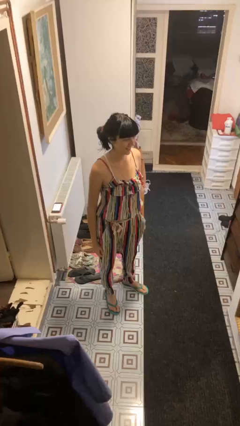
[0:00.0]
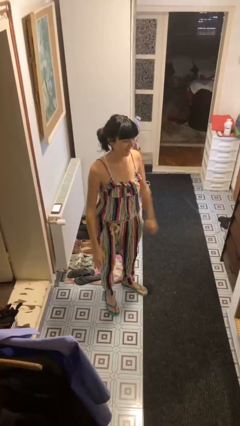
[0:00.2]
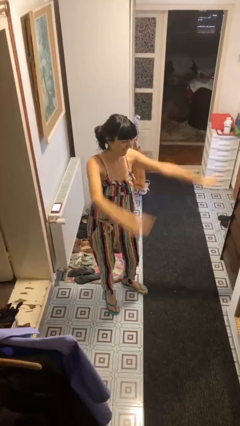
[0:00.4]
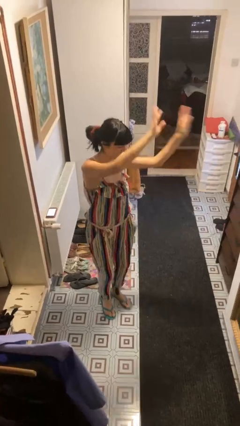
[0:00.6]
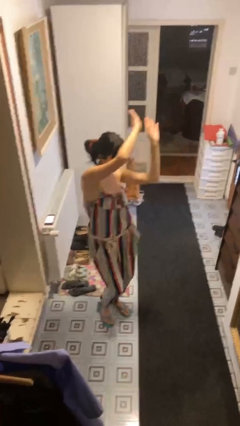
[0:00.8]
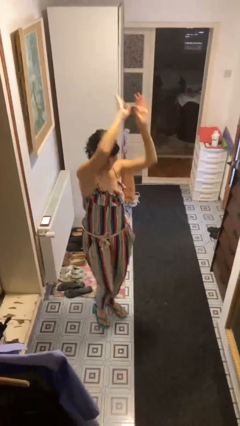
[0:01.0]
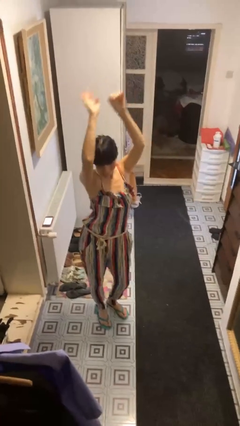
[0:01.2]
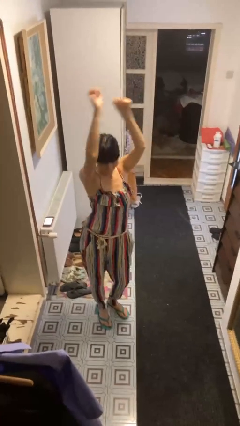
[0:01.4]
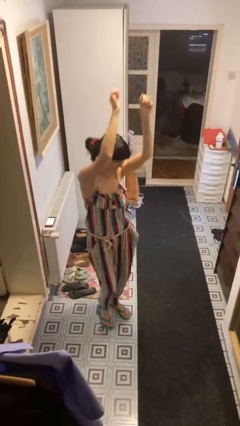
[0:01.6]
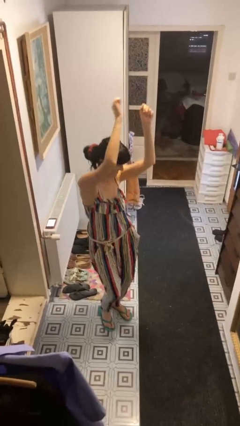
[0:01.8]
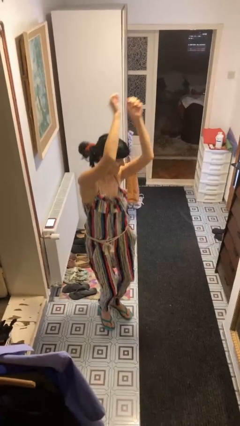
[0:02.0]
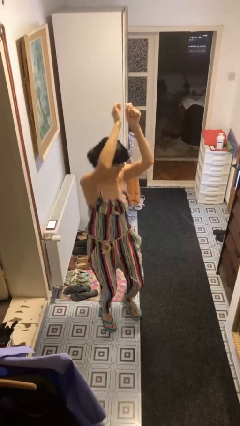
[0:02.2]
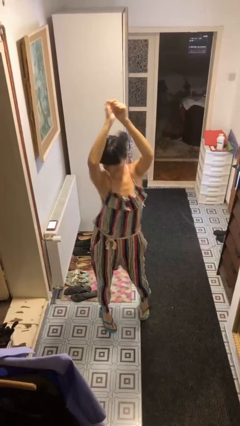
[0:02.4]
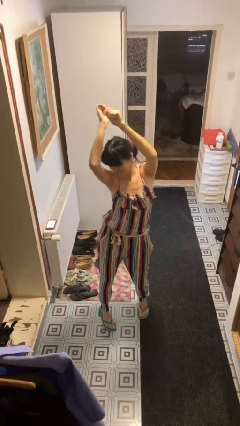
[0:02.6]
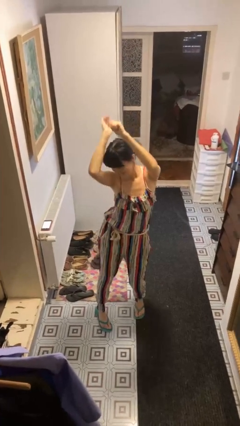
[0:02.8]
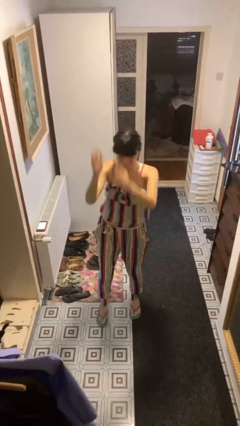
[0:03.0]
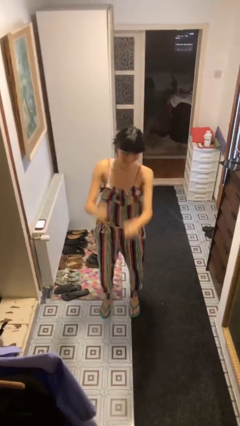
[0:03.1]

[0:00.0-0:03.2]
person dances in place

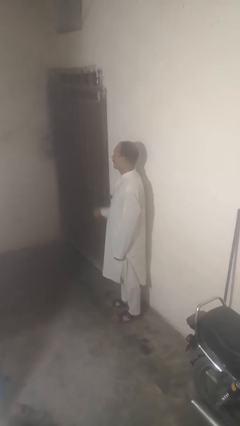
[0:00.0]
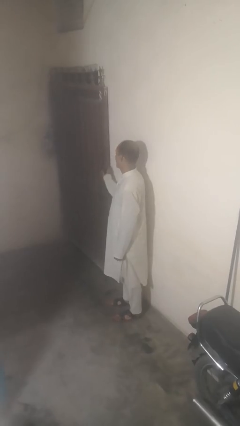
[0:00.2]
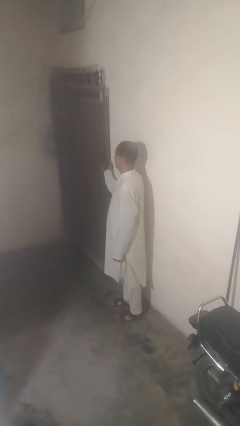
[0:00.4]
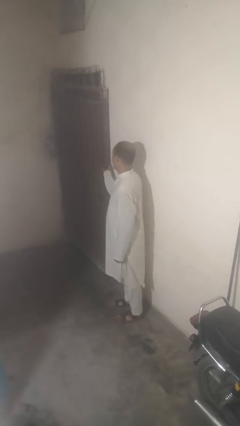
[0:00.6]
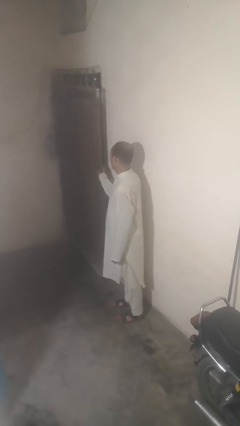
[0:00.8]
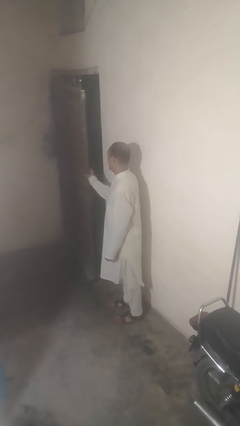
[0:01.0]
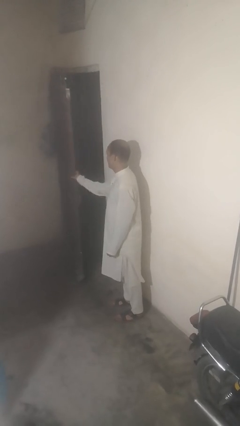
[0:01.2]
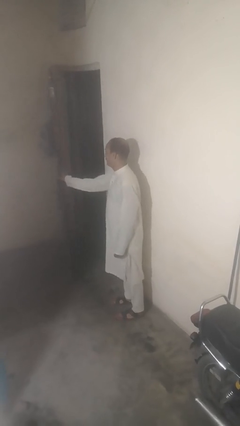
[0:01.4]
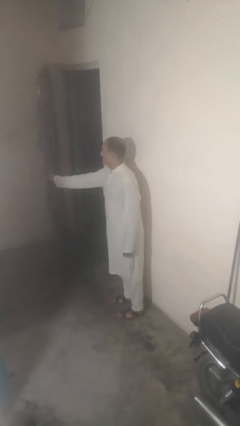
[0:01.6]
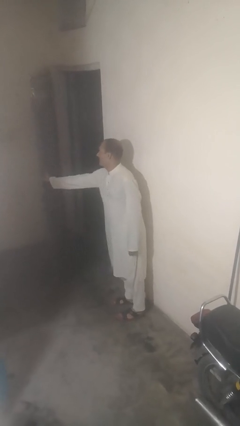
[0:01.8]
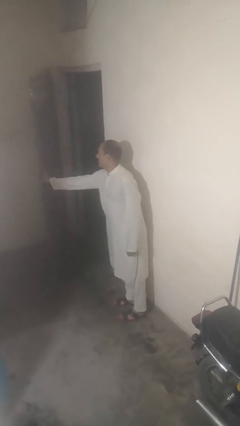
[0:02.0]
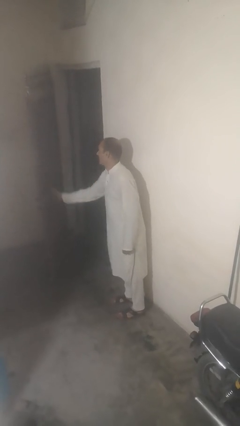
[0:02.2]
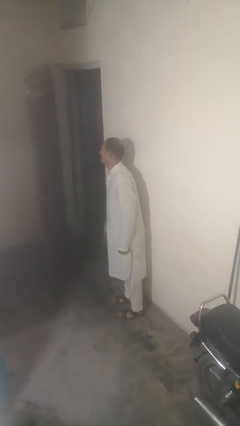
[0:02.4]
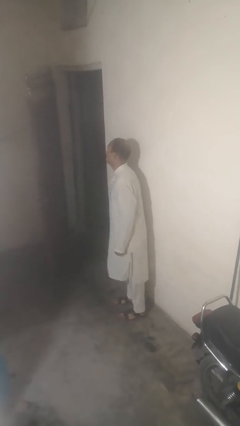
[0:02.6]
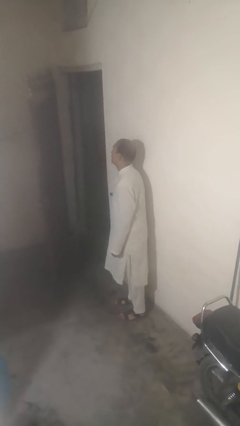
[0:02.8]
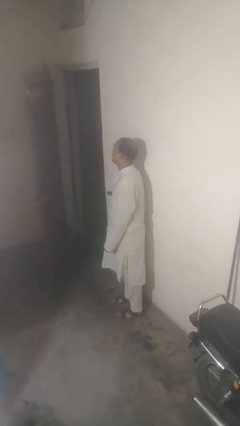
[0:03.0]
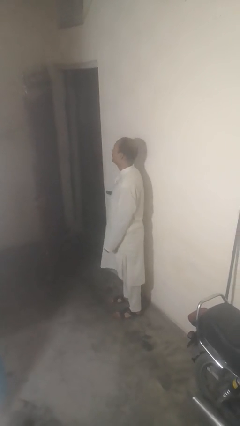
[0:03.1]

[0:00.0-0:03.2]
person opens gate

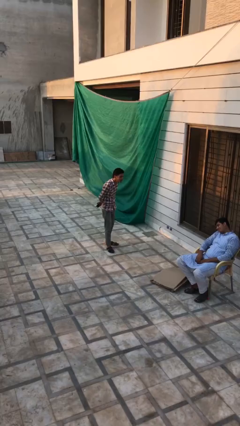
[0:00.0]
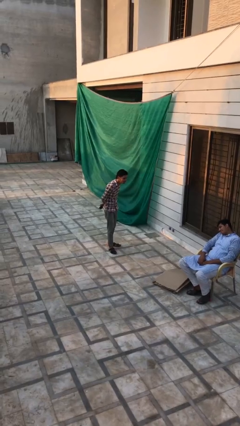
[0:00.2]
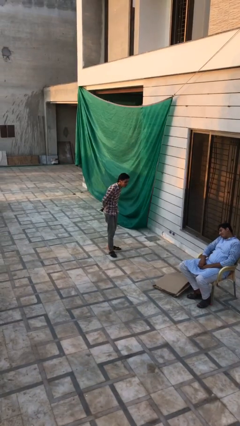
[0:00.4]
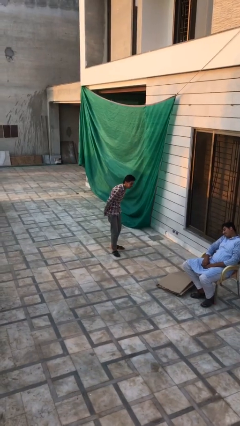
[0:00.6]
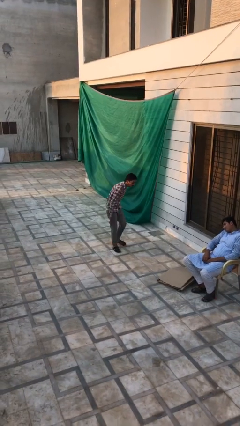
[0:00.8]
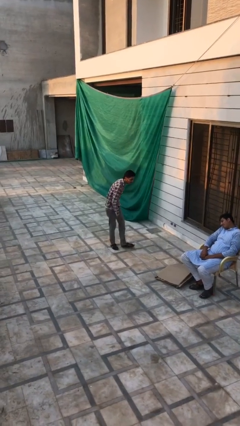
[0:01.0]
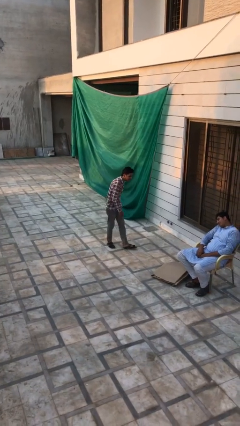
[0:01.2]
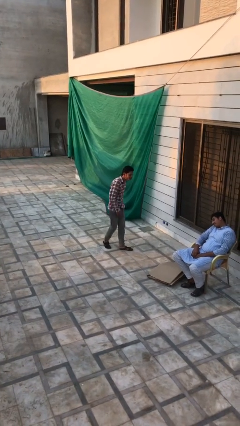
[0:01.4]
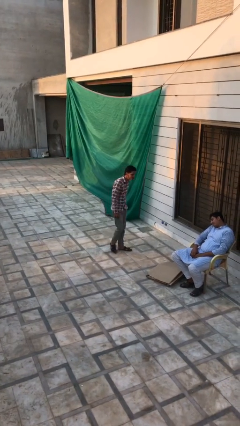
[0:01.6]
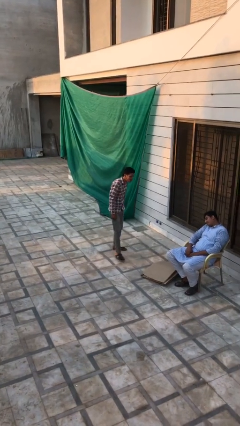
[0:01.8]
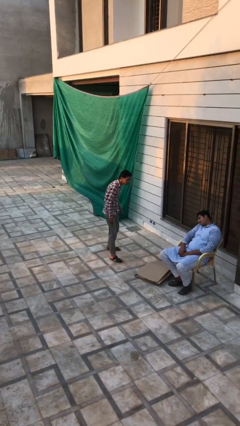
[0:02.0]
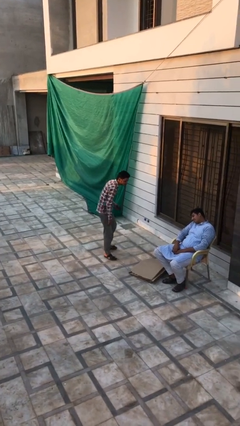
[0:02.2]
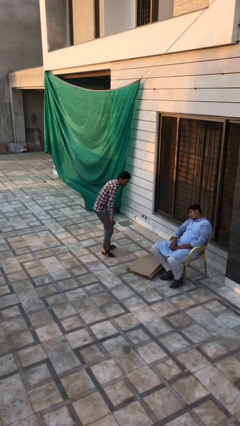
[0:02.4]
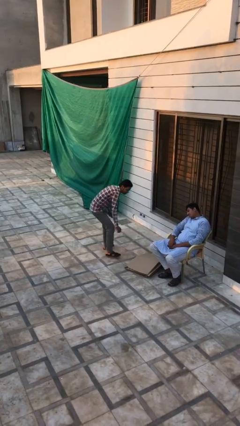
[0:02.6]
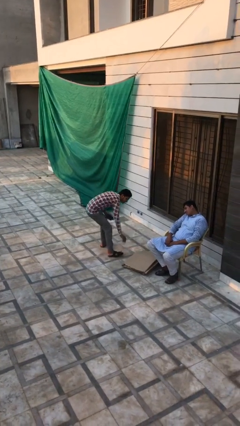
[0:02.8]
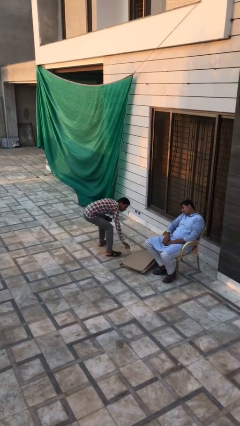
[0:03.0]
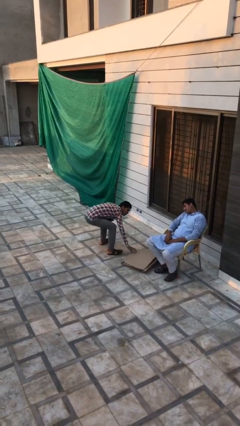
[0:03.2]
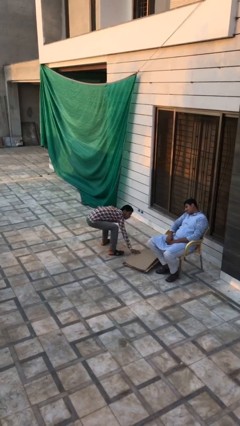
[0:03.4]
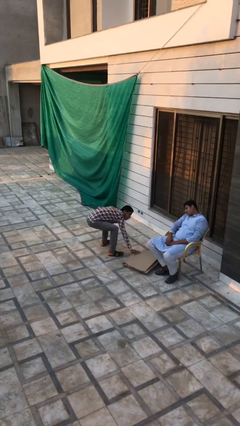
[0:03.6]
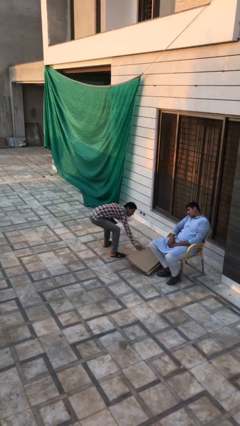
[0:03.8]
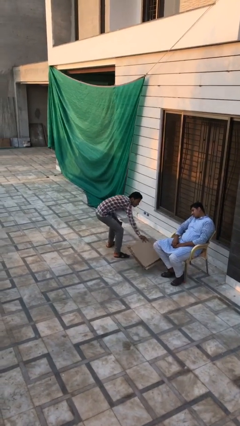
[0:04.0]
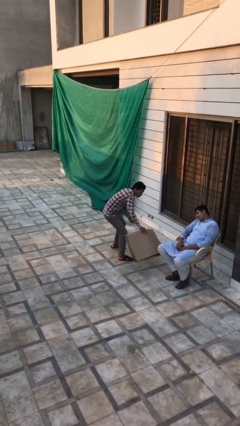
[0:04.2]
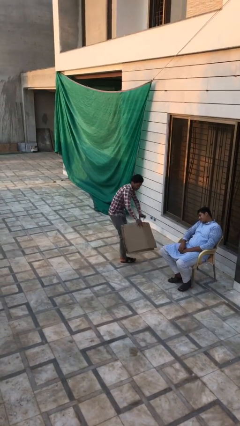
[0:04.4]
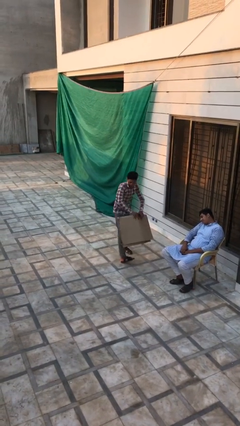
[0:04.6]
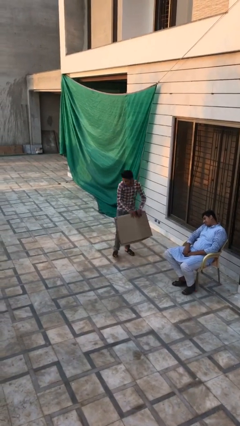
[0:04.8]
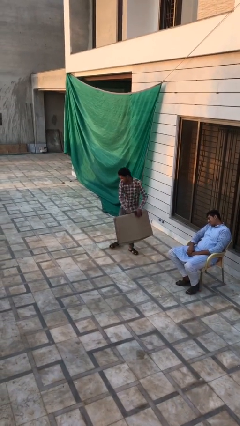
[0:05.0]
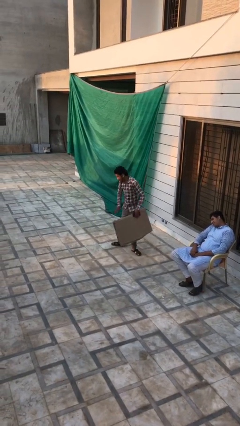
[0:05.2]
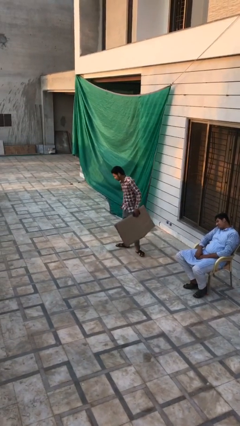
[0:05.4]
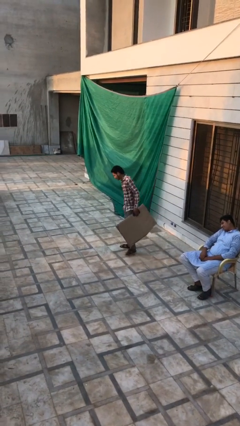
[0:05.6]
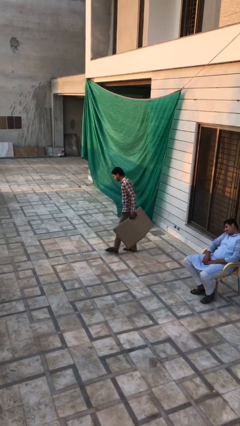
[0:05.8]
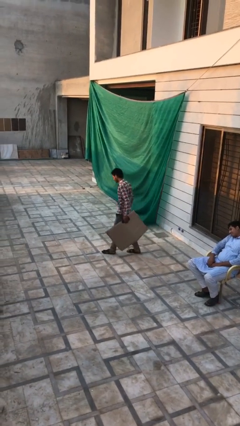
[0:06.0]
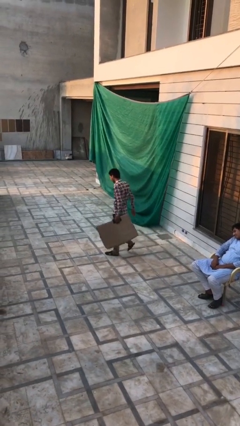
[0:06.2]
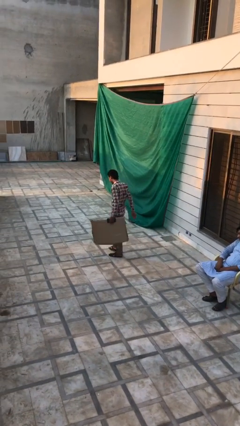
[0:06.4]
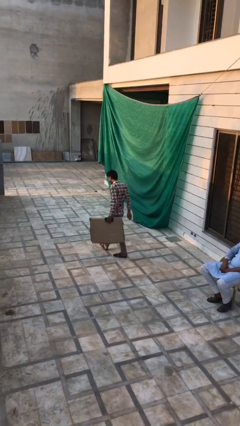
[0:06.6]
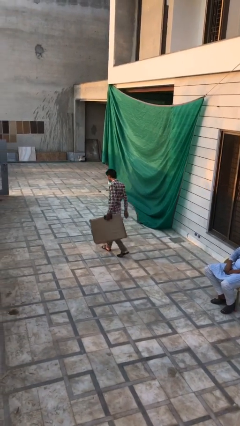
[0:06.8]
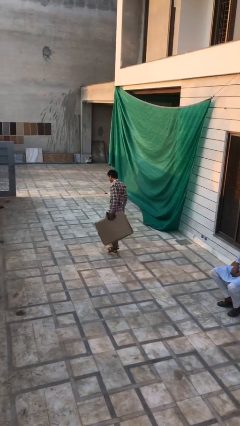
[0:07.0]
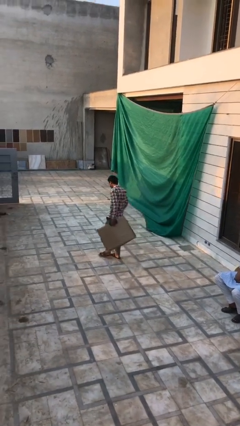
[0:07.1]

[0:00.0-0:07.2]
person steals object from person

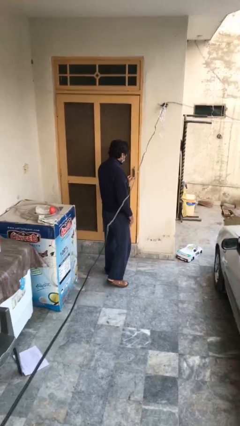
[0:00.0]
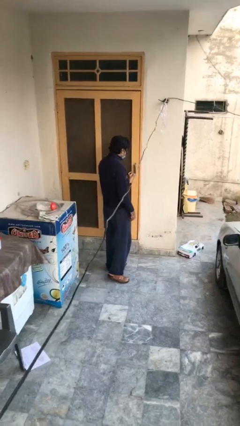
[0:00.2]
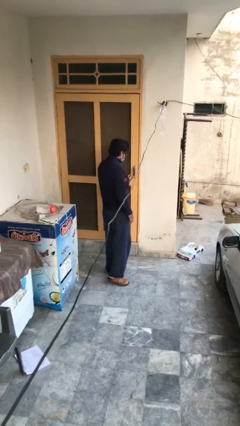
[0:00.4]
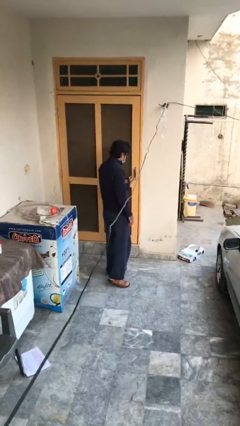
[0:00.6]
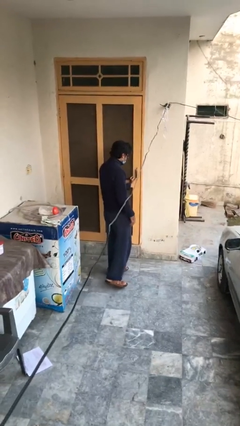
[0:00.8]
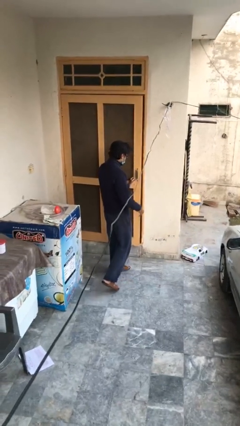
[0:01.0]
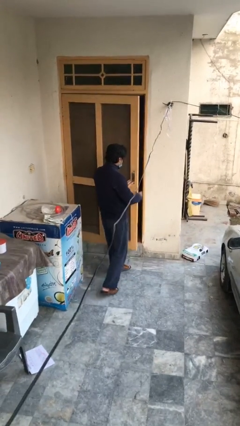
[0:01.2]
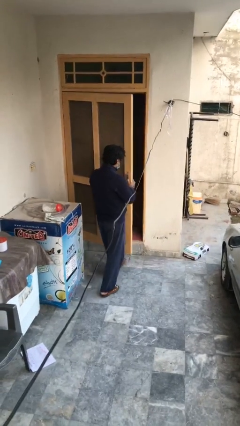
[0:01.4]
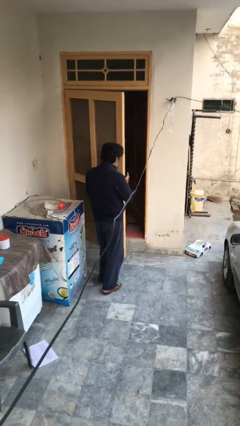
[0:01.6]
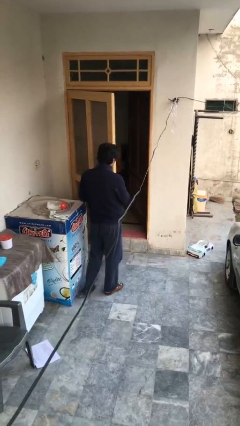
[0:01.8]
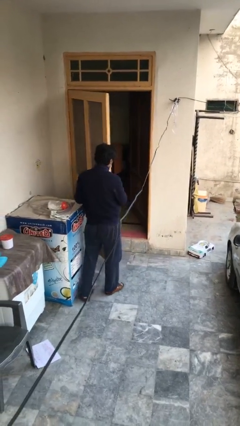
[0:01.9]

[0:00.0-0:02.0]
person opens facility door

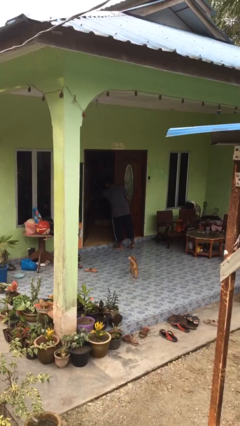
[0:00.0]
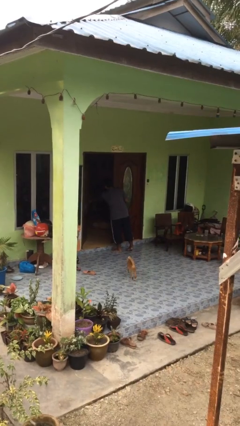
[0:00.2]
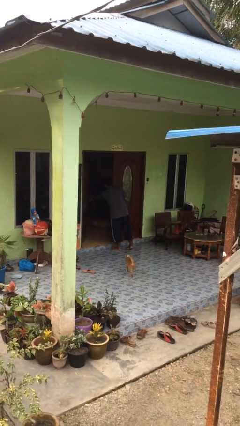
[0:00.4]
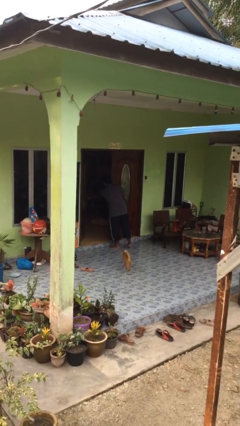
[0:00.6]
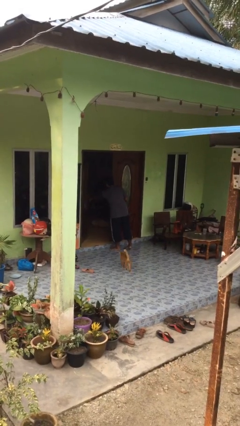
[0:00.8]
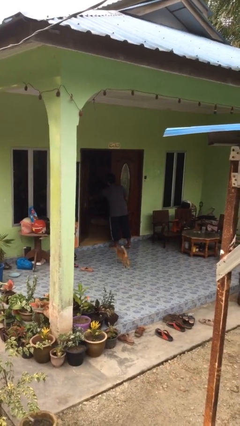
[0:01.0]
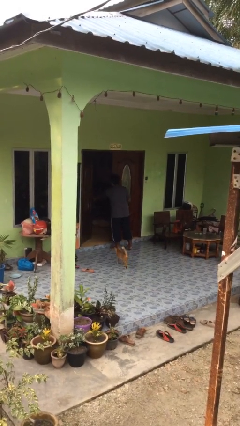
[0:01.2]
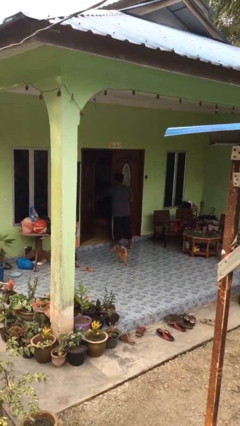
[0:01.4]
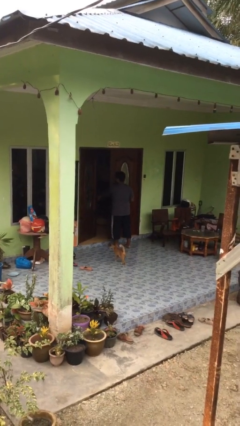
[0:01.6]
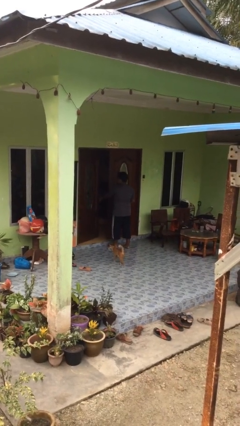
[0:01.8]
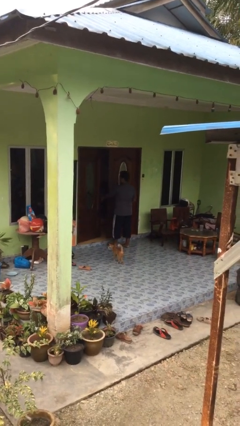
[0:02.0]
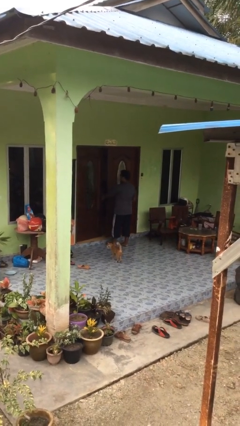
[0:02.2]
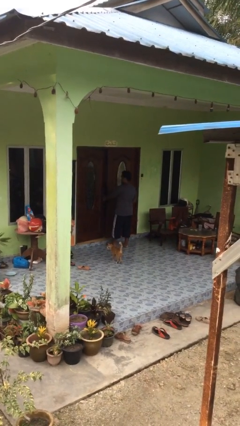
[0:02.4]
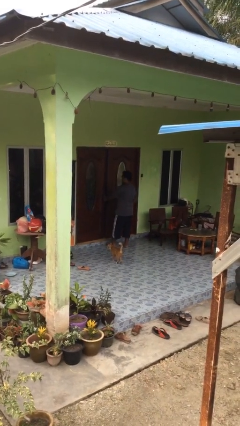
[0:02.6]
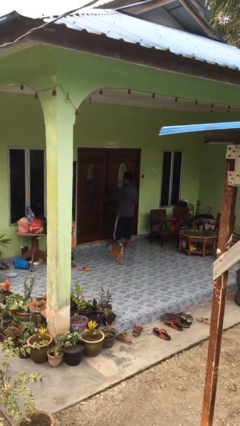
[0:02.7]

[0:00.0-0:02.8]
person closes facility door
